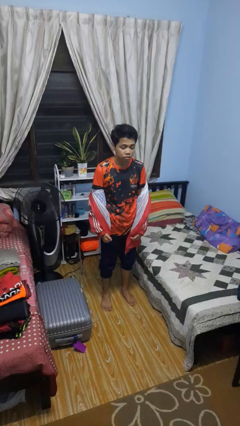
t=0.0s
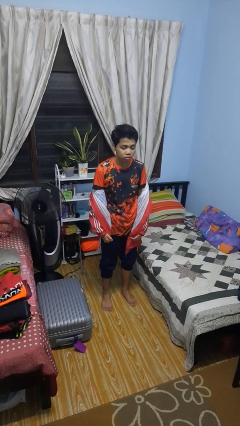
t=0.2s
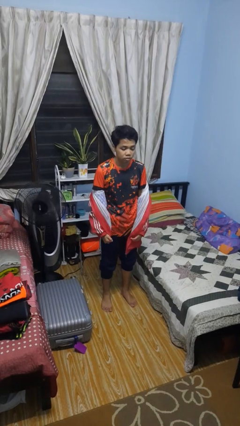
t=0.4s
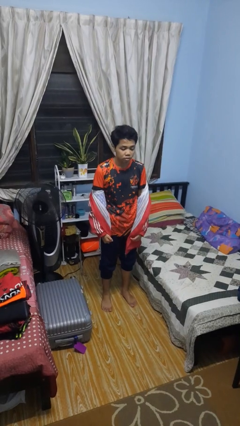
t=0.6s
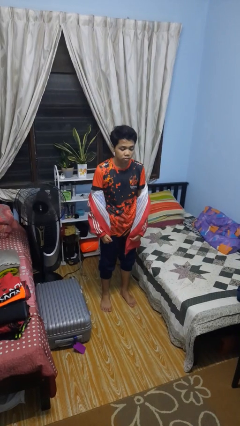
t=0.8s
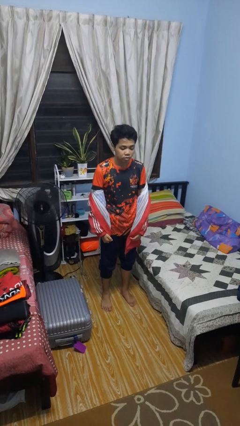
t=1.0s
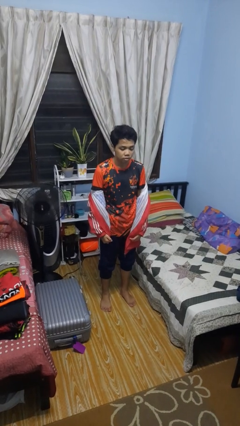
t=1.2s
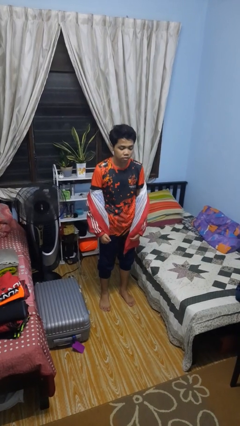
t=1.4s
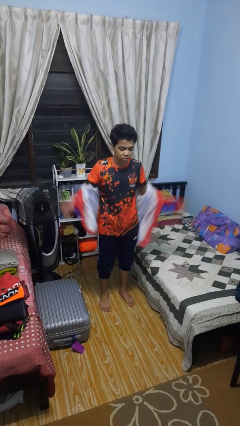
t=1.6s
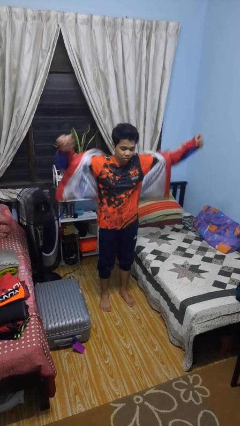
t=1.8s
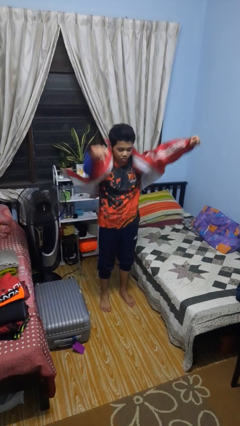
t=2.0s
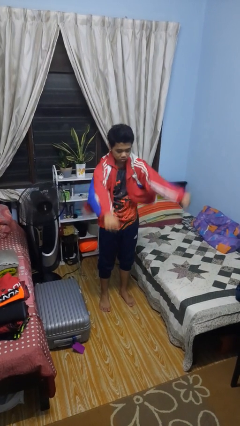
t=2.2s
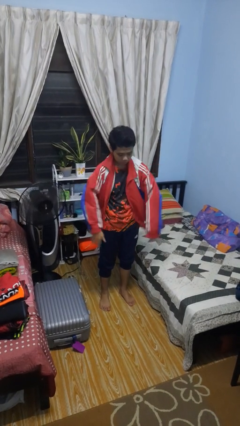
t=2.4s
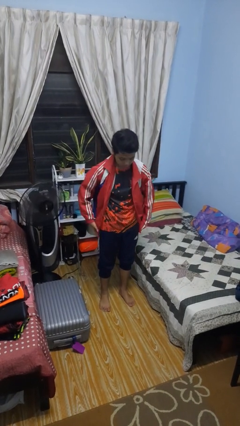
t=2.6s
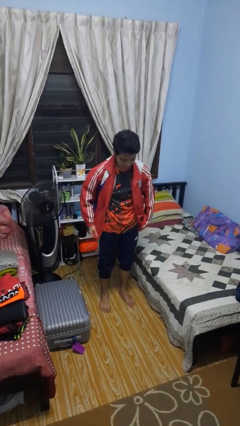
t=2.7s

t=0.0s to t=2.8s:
person puts on jacket

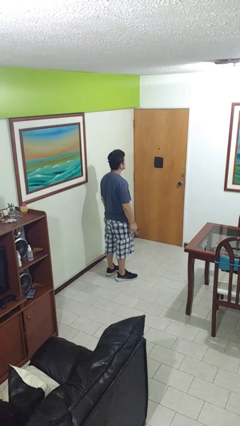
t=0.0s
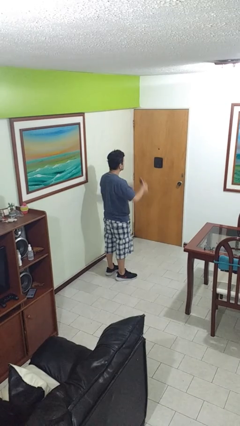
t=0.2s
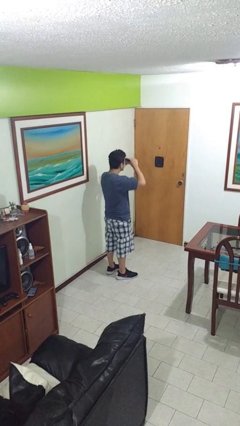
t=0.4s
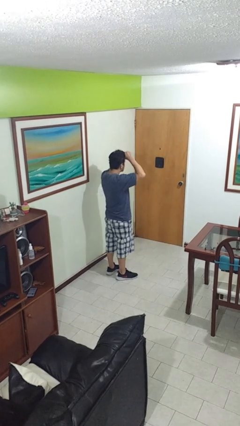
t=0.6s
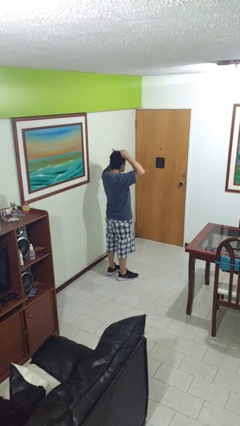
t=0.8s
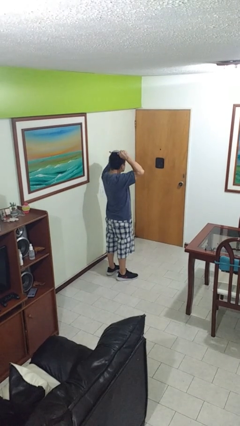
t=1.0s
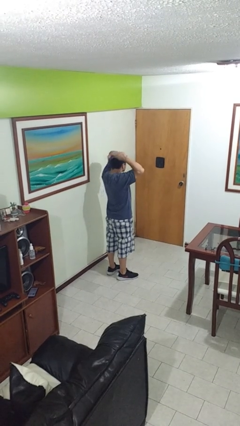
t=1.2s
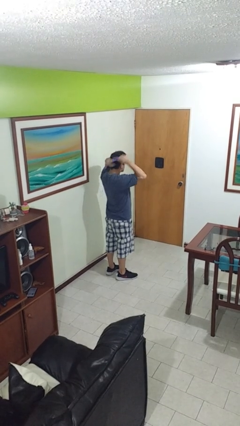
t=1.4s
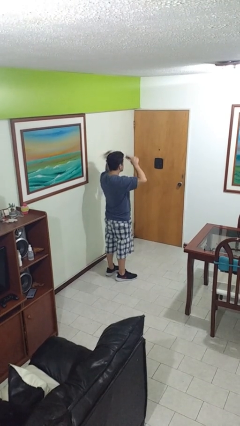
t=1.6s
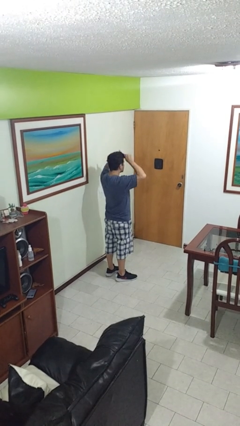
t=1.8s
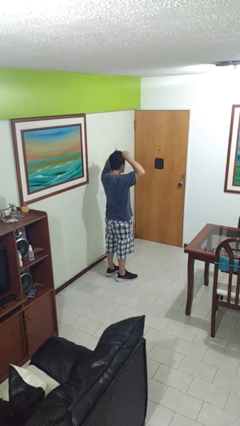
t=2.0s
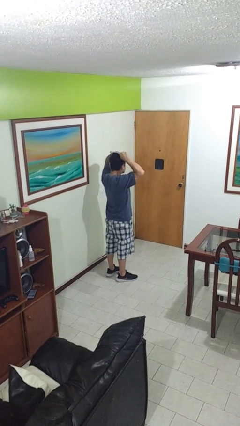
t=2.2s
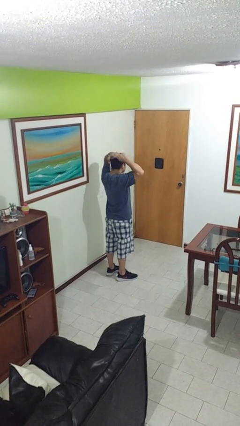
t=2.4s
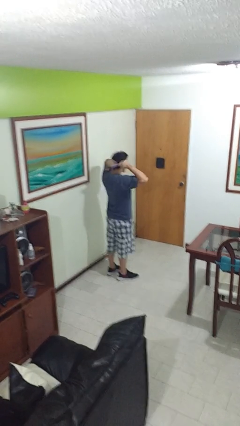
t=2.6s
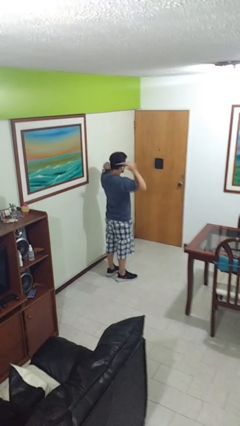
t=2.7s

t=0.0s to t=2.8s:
person brushes hair

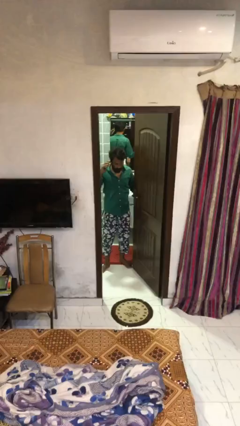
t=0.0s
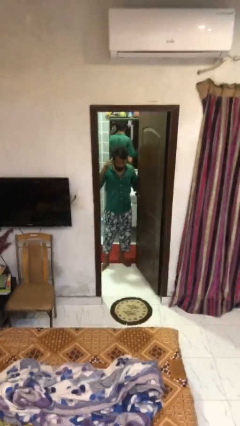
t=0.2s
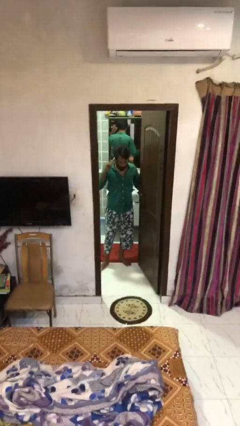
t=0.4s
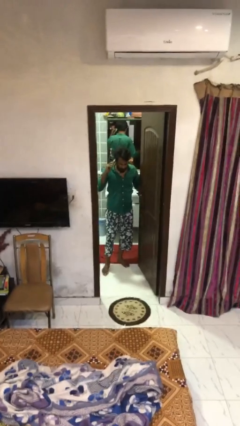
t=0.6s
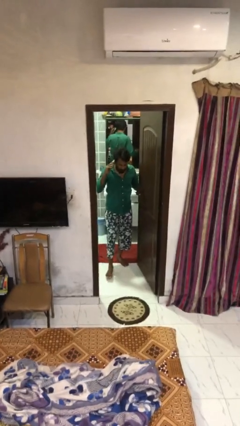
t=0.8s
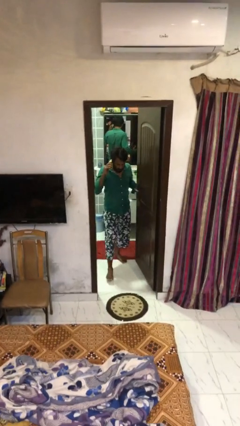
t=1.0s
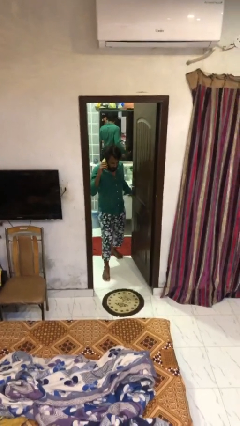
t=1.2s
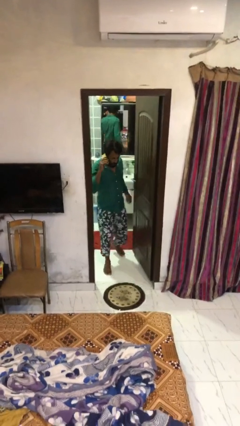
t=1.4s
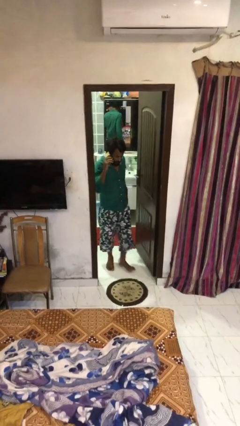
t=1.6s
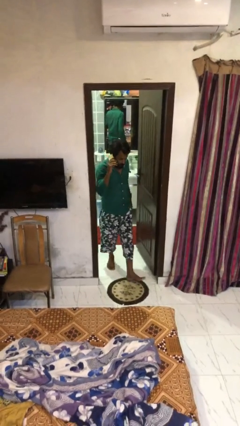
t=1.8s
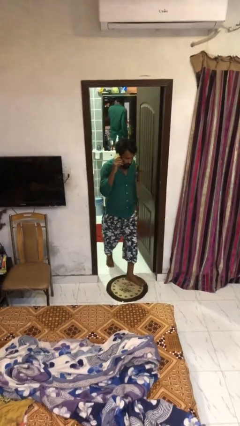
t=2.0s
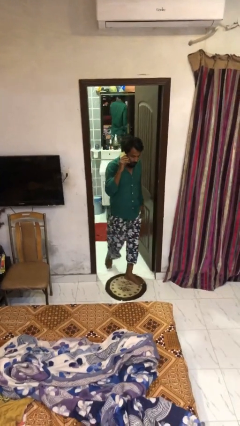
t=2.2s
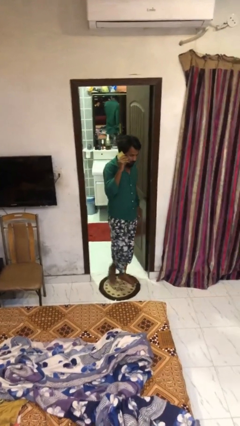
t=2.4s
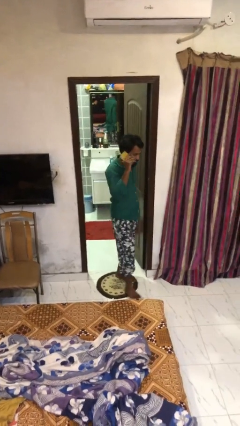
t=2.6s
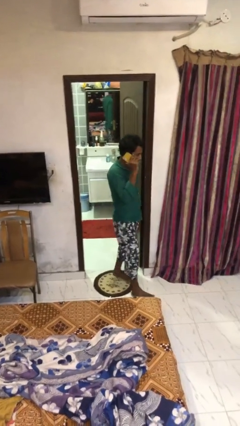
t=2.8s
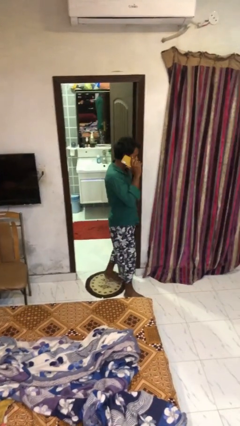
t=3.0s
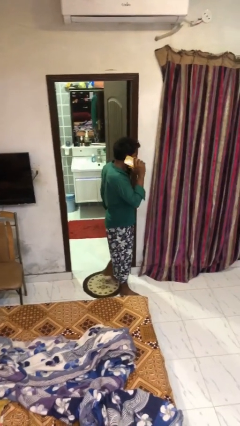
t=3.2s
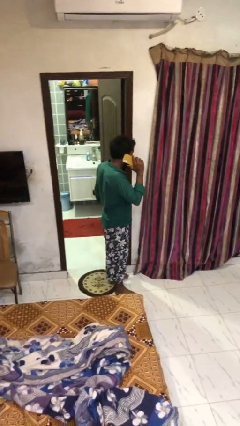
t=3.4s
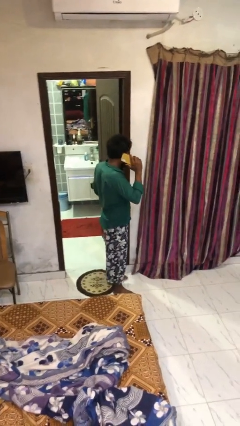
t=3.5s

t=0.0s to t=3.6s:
person enters scene through structure

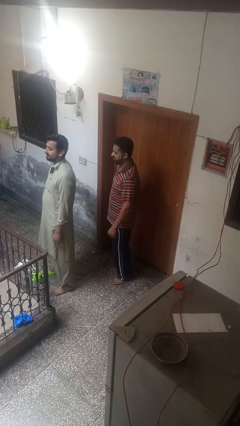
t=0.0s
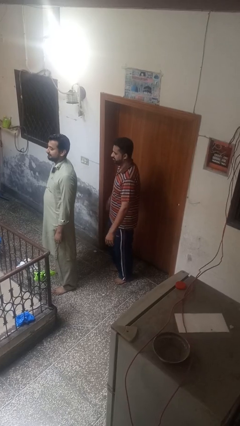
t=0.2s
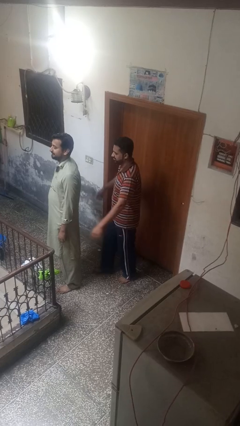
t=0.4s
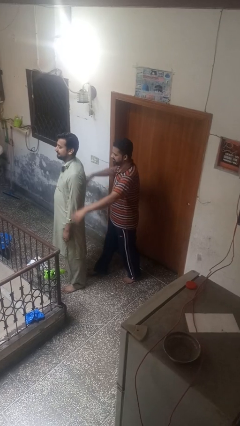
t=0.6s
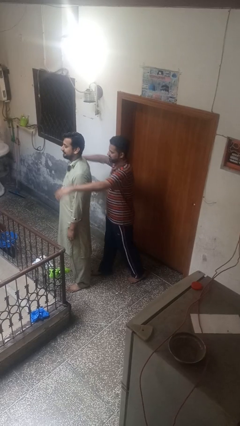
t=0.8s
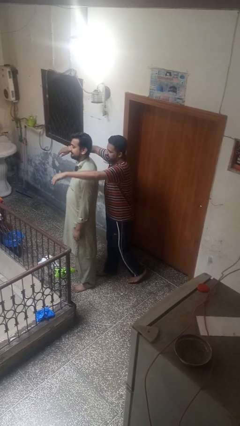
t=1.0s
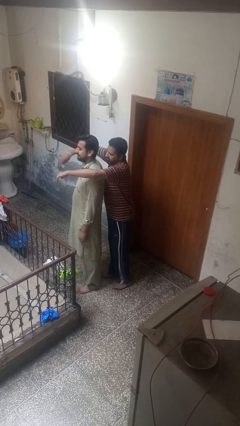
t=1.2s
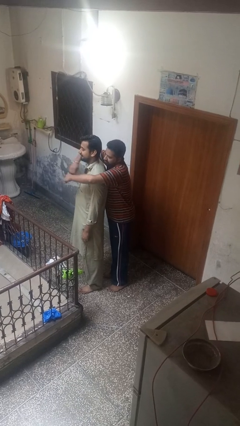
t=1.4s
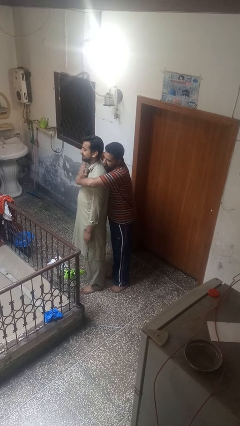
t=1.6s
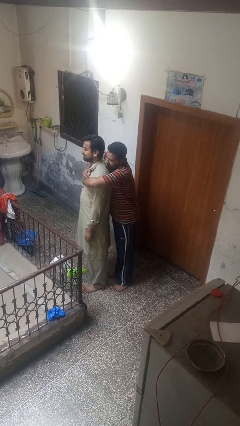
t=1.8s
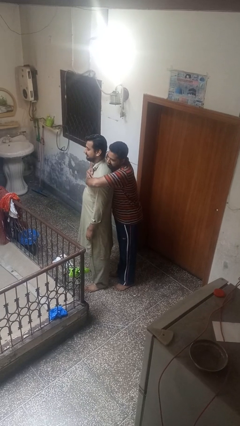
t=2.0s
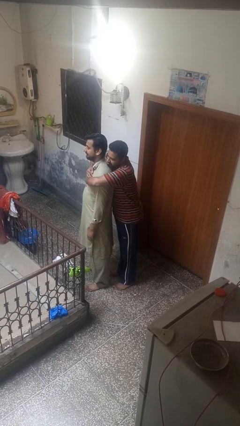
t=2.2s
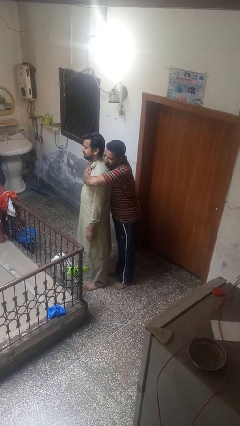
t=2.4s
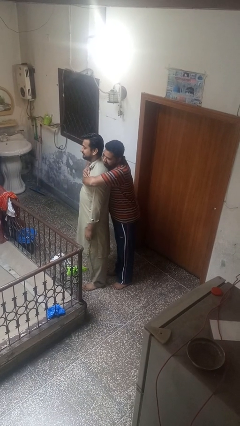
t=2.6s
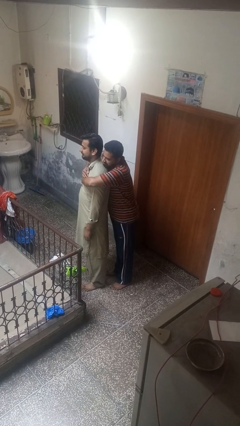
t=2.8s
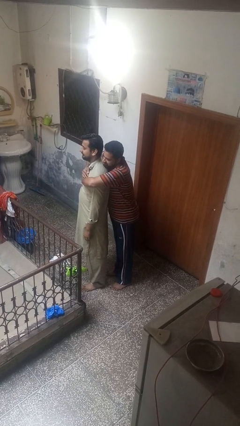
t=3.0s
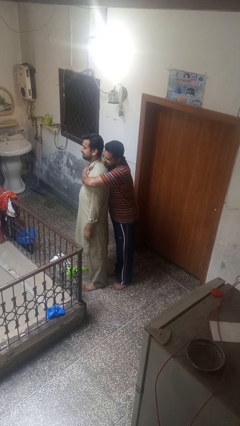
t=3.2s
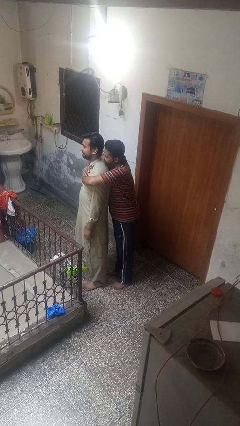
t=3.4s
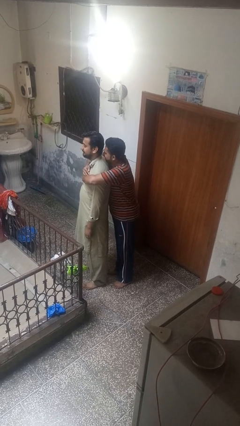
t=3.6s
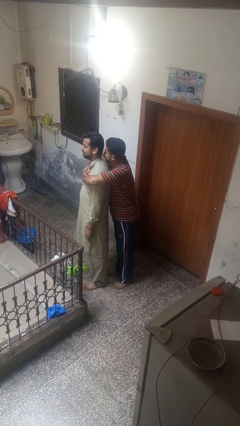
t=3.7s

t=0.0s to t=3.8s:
person hugs person from behind

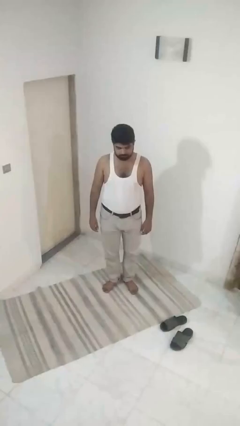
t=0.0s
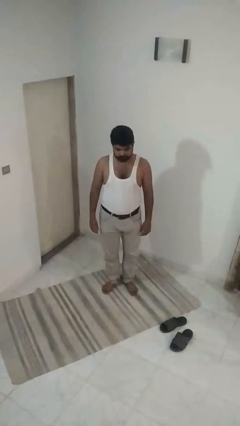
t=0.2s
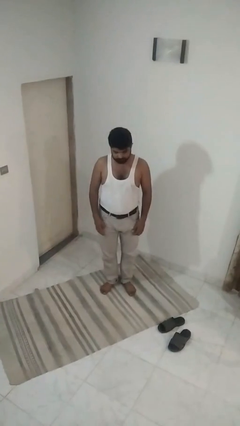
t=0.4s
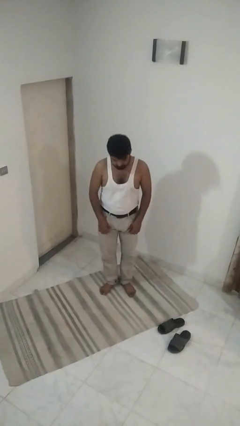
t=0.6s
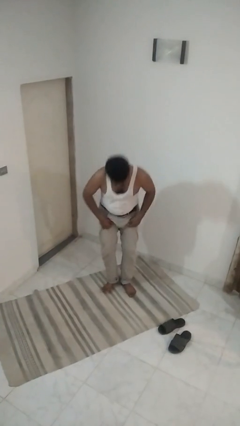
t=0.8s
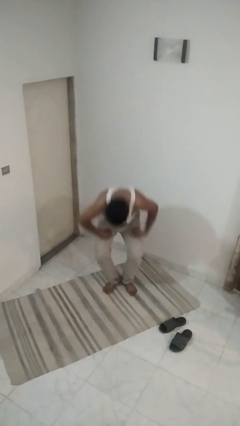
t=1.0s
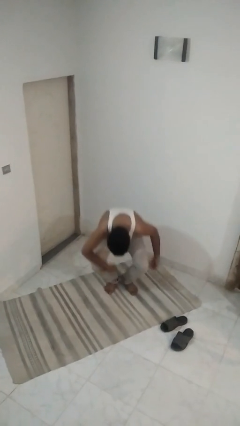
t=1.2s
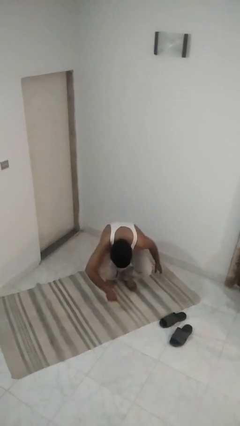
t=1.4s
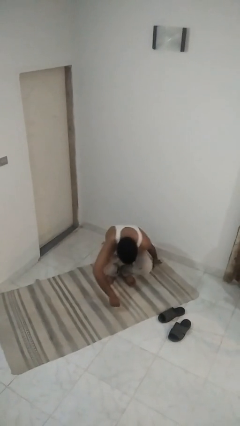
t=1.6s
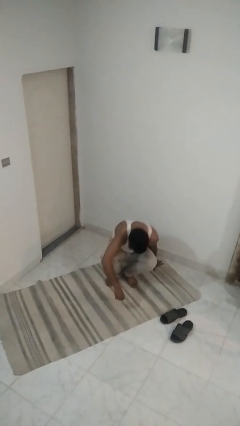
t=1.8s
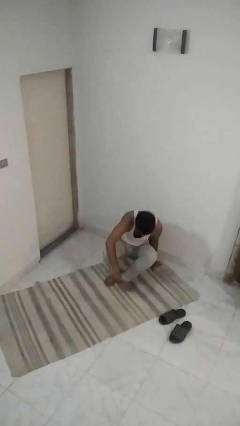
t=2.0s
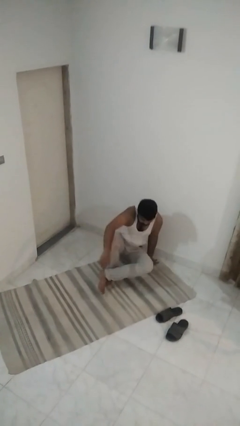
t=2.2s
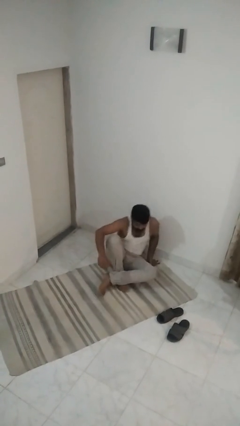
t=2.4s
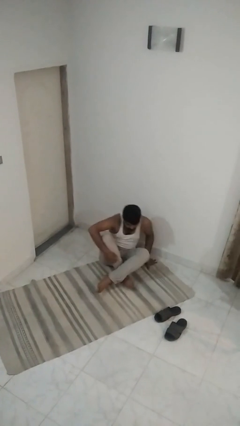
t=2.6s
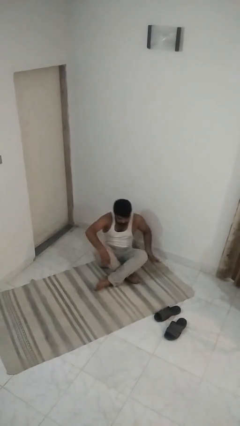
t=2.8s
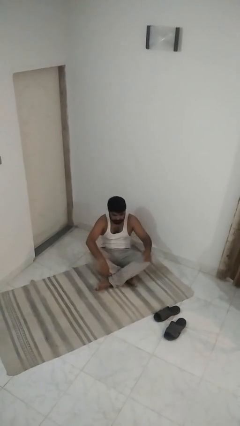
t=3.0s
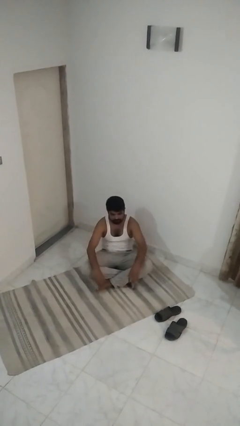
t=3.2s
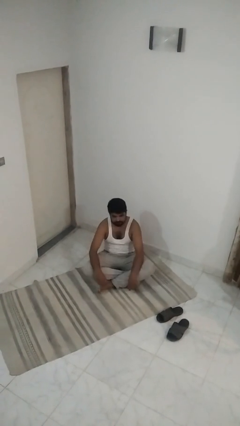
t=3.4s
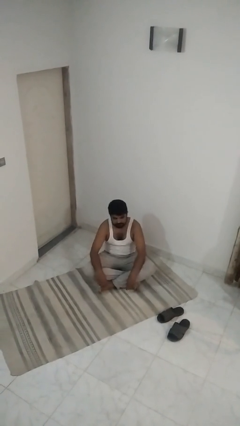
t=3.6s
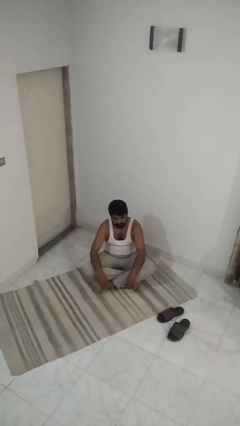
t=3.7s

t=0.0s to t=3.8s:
person sits crisscross

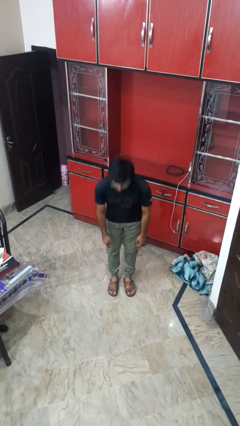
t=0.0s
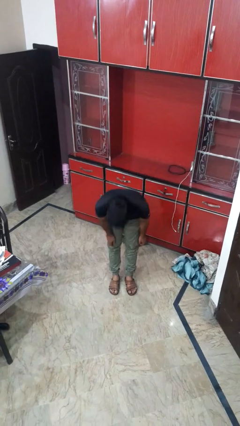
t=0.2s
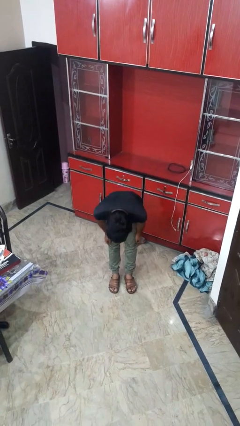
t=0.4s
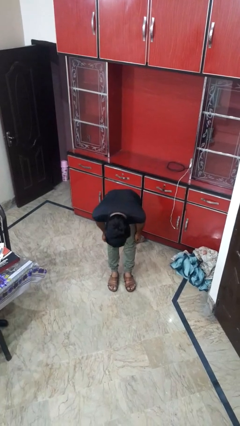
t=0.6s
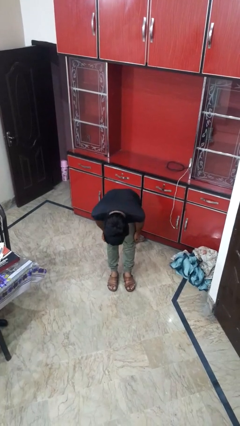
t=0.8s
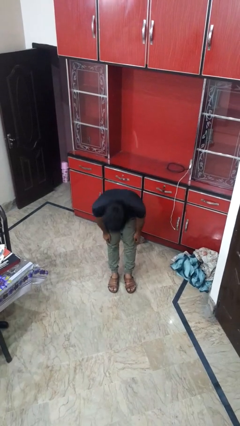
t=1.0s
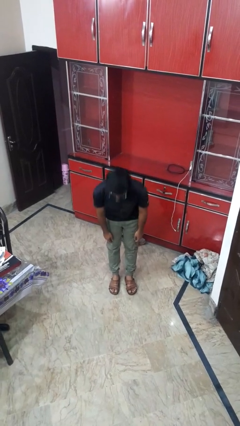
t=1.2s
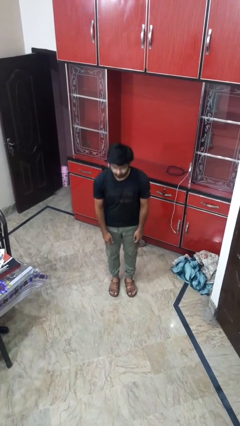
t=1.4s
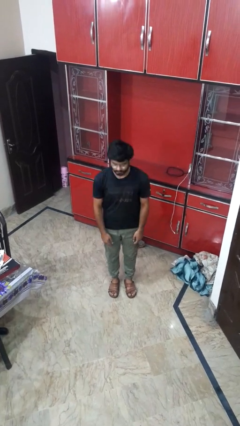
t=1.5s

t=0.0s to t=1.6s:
person bows
